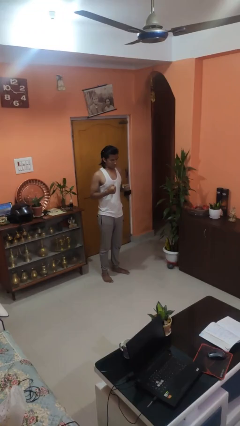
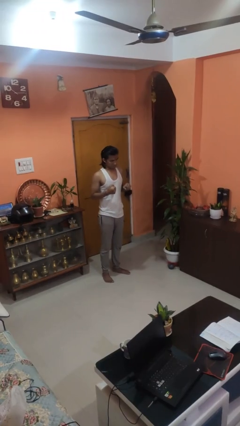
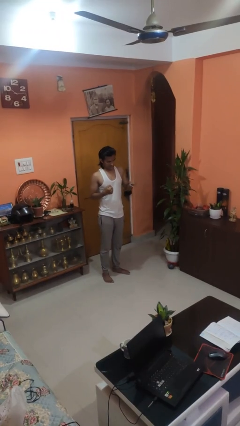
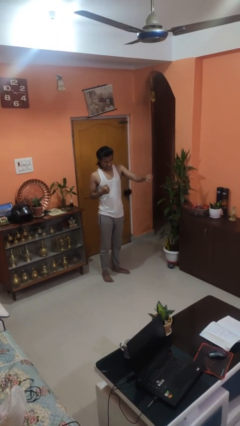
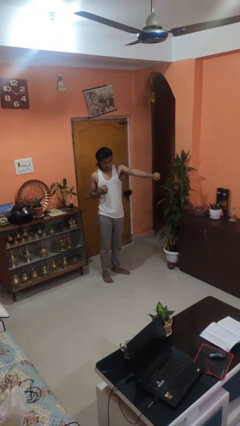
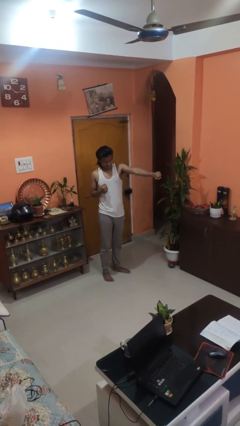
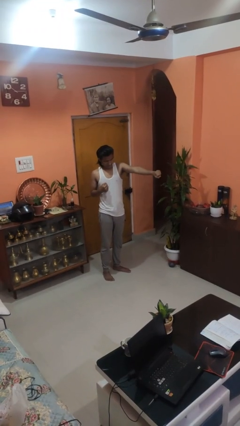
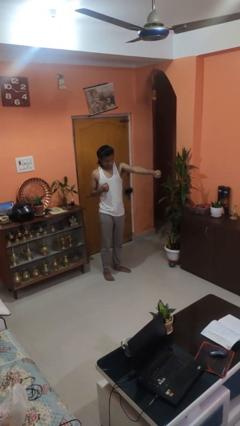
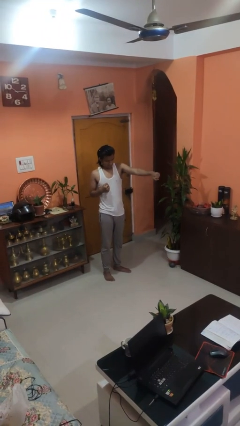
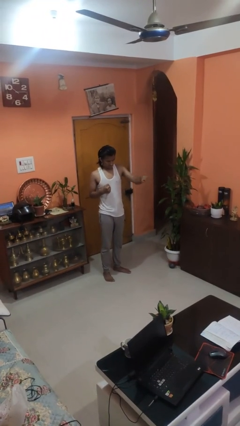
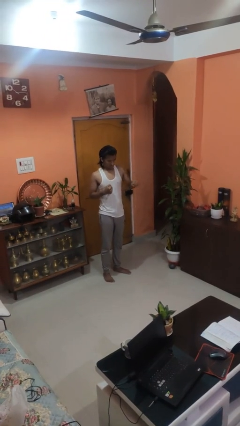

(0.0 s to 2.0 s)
person punches

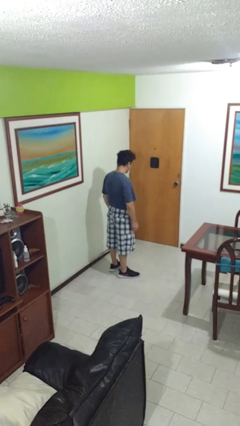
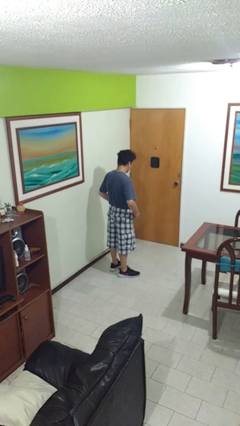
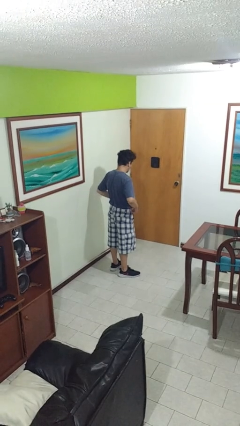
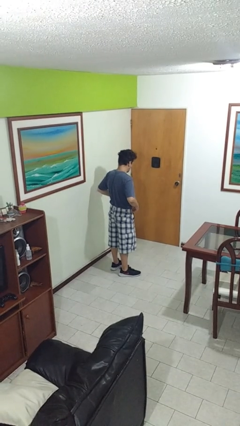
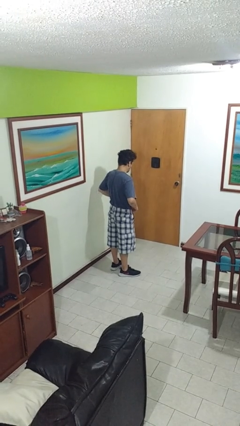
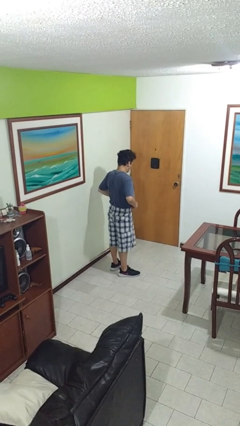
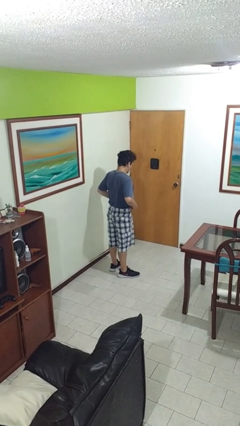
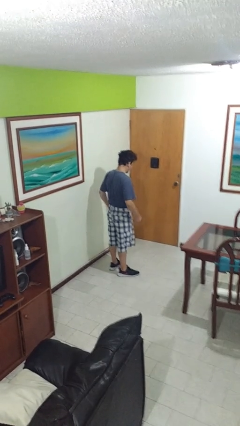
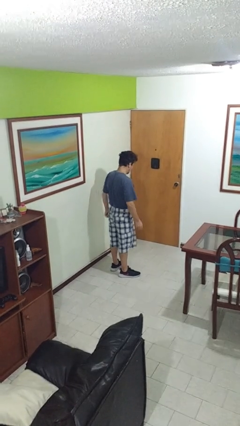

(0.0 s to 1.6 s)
person hikes up pants

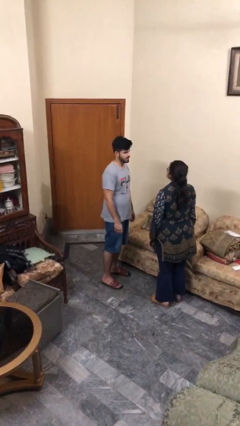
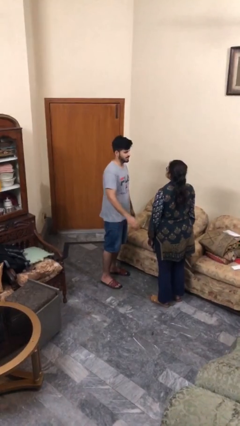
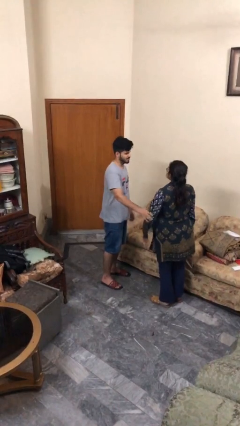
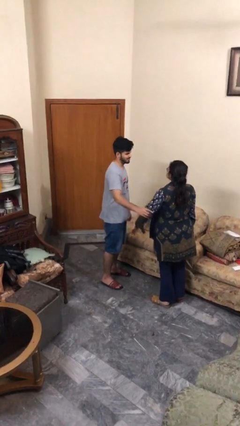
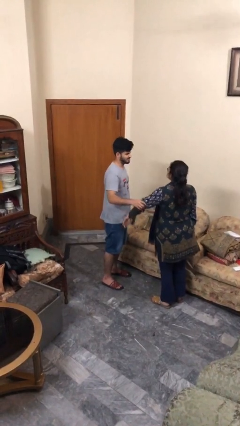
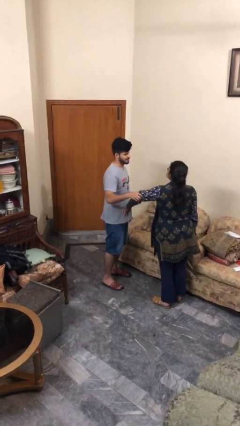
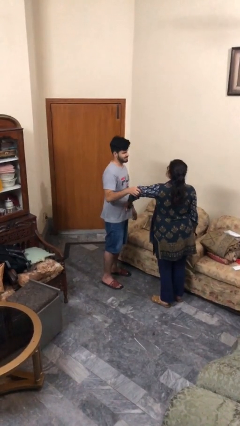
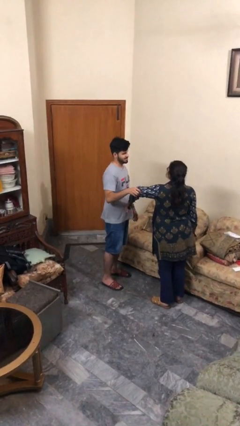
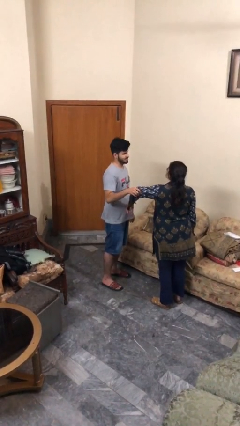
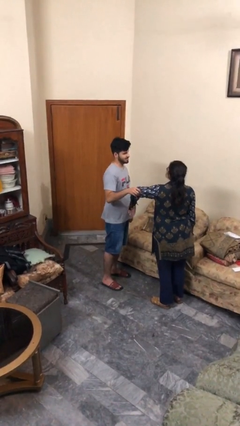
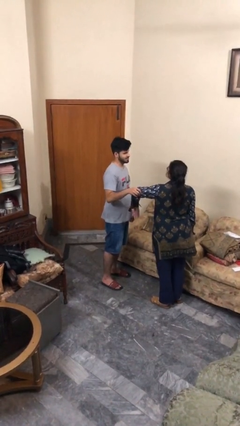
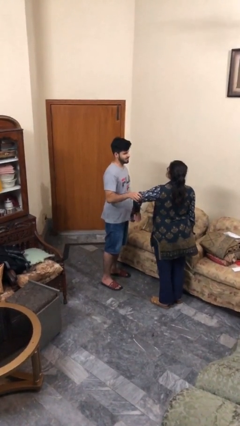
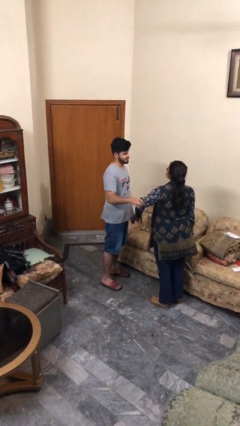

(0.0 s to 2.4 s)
person grabs person by bicep

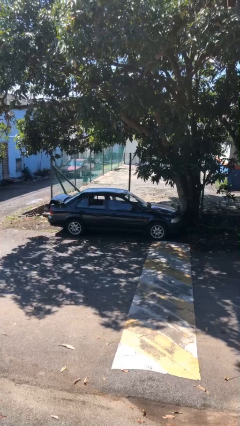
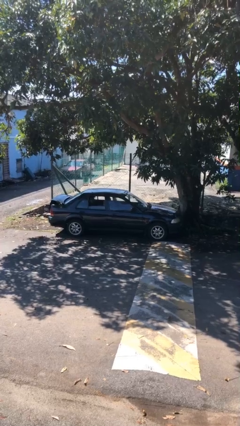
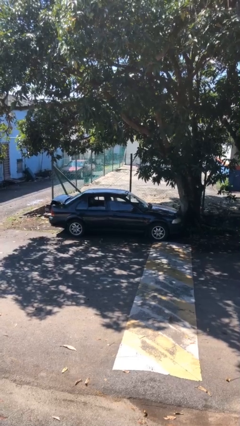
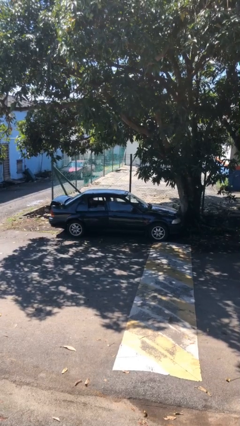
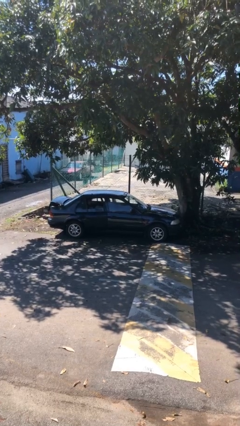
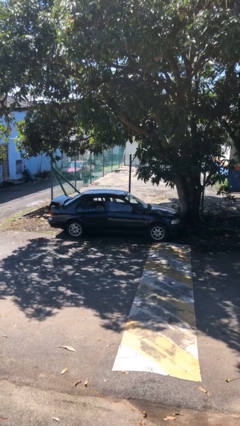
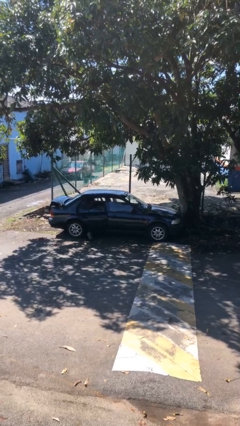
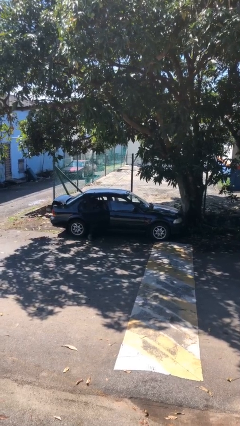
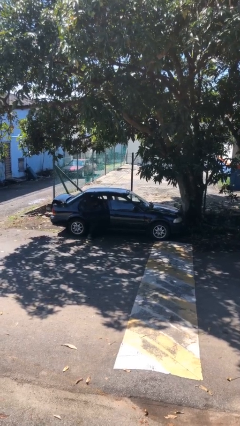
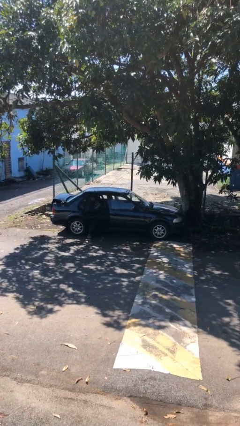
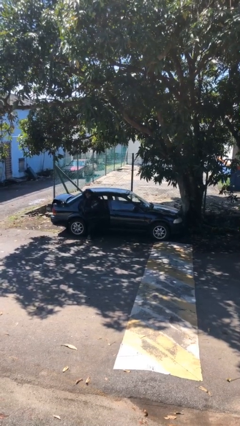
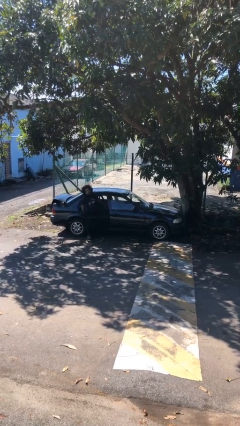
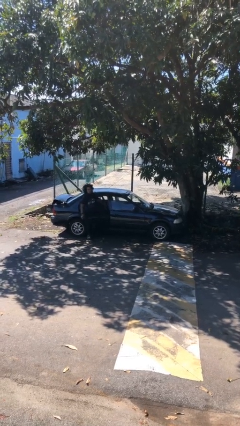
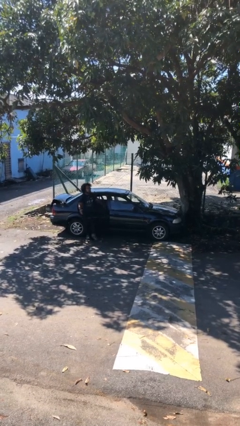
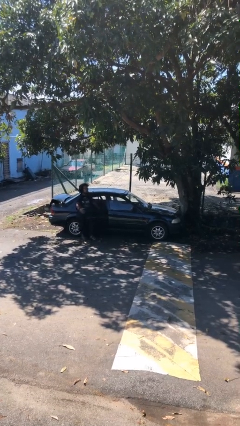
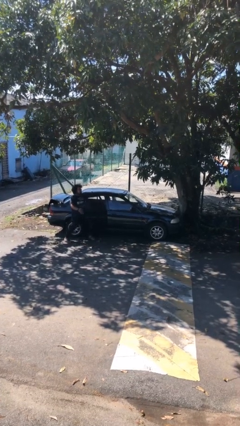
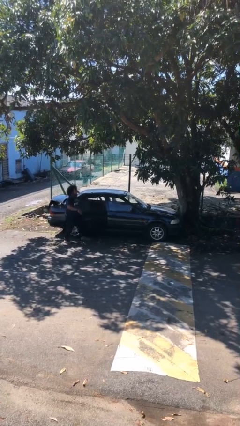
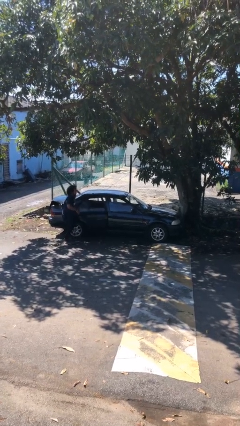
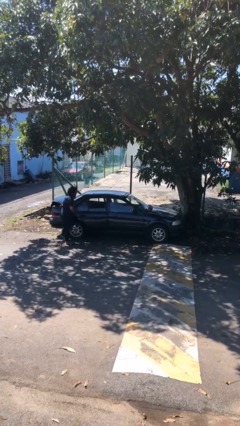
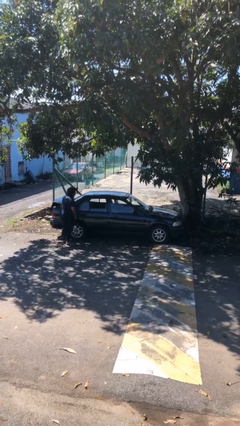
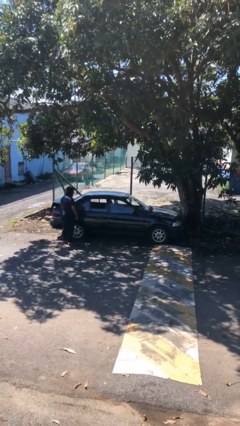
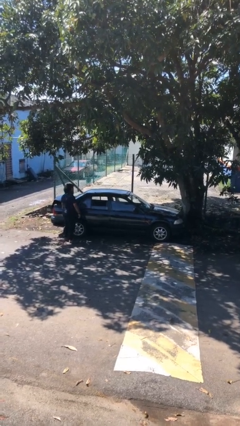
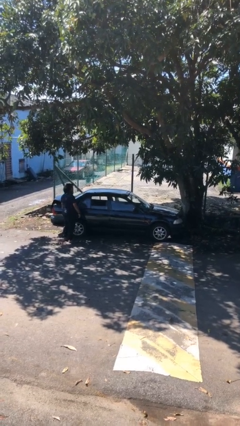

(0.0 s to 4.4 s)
car drops off person

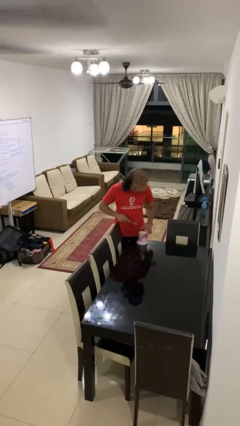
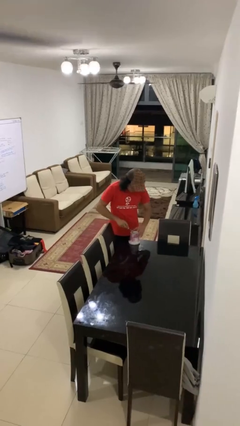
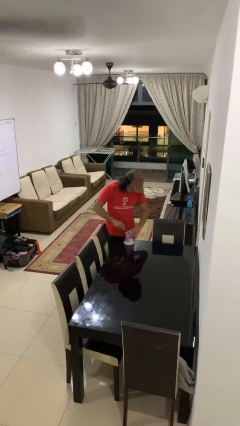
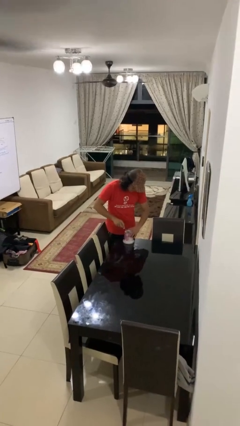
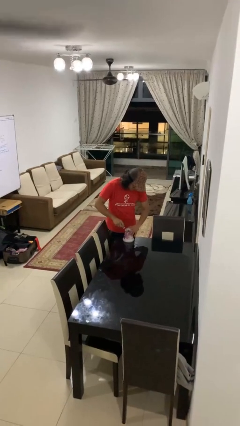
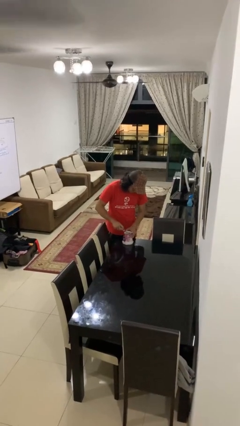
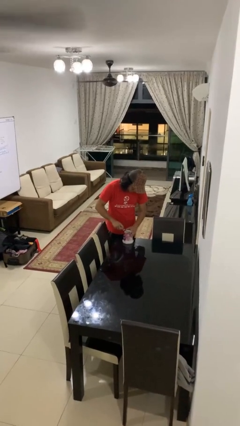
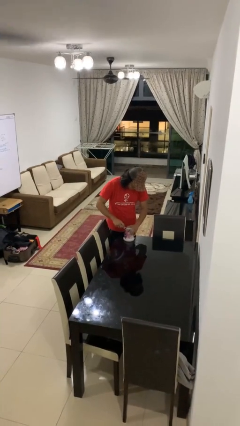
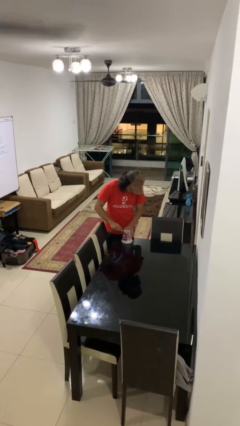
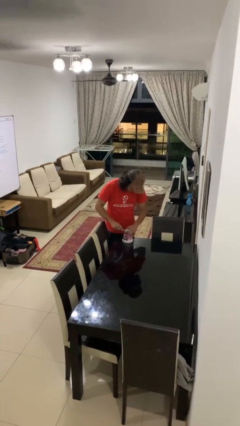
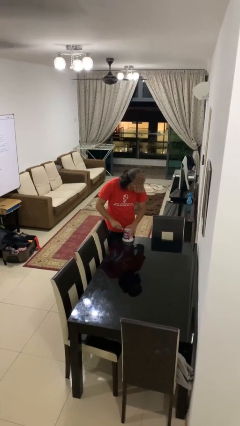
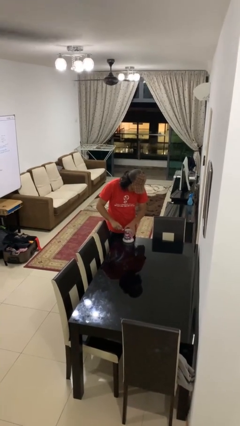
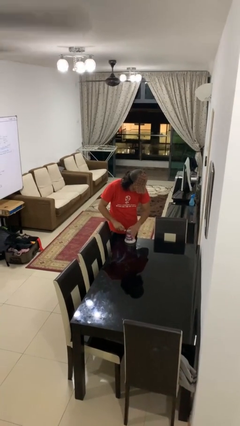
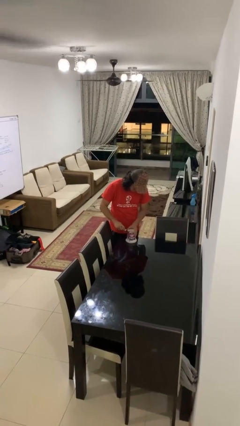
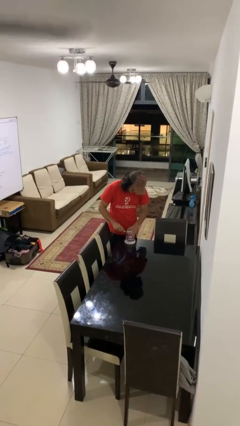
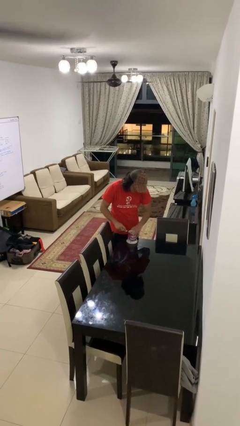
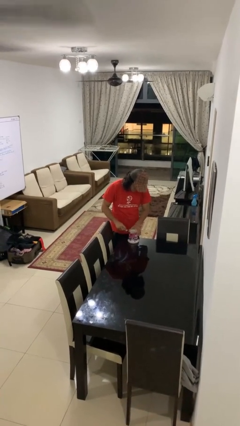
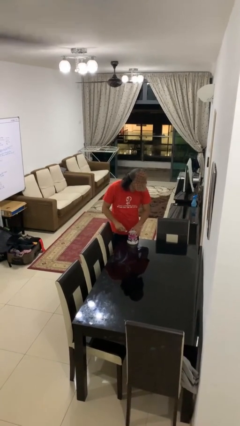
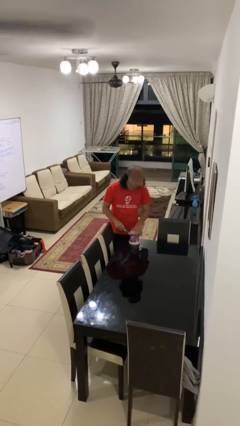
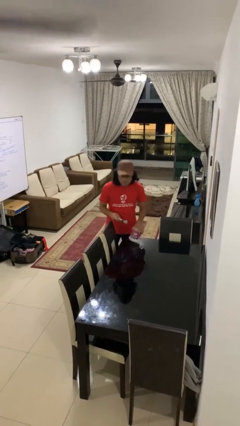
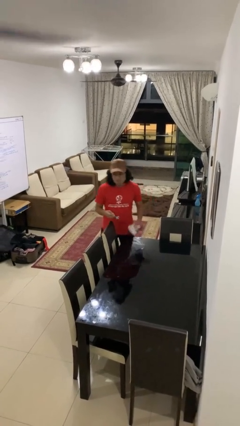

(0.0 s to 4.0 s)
person opens can with can opener

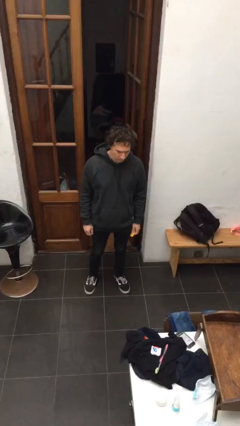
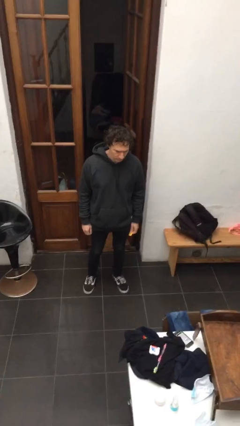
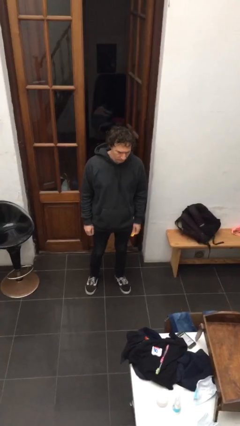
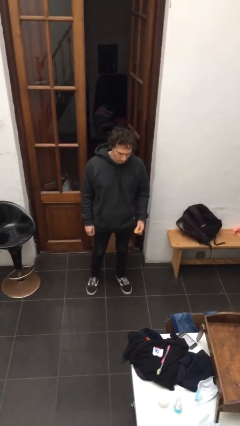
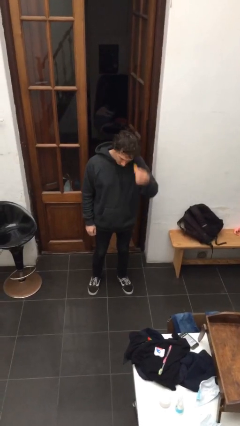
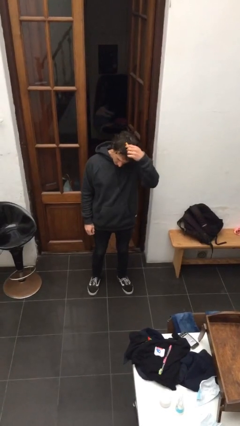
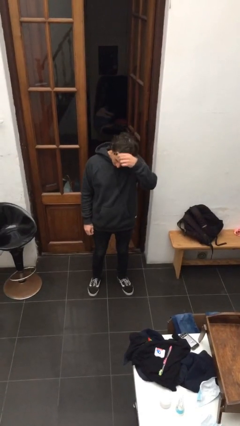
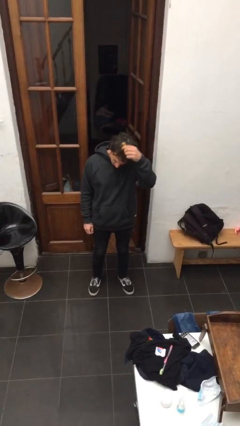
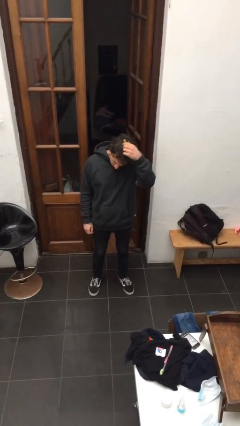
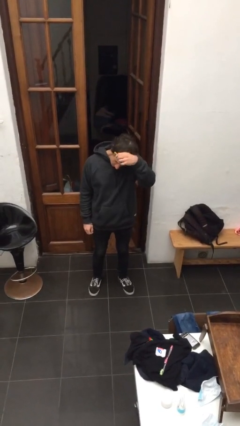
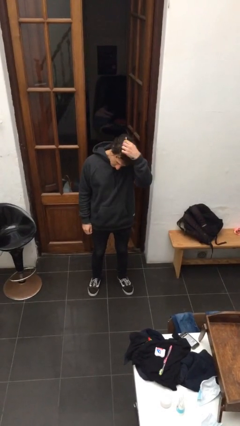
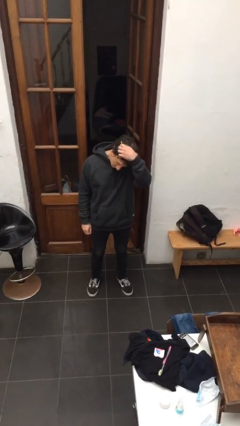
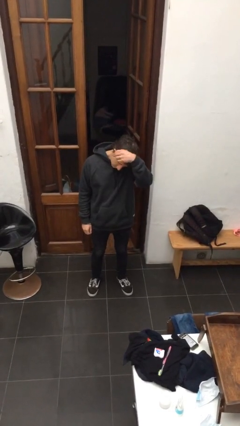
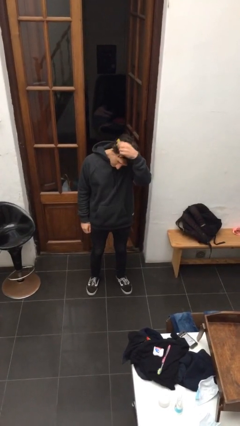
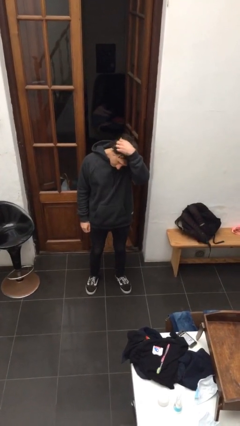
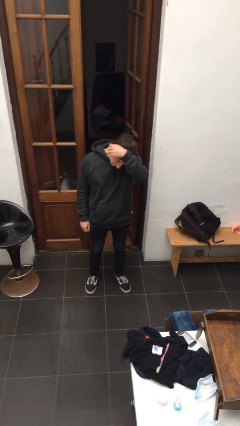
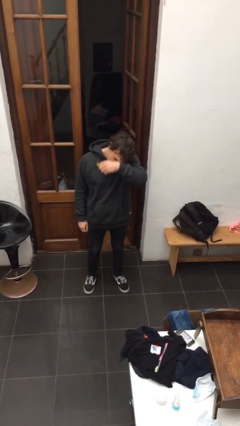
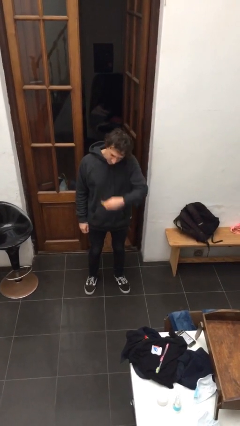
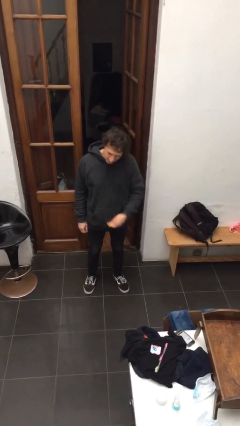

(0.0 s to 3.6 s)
person brushes hair
